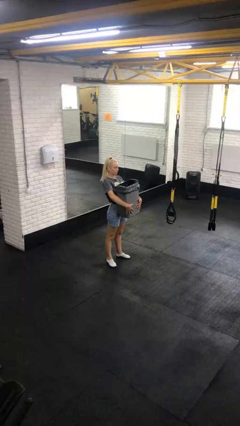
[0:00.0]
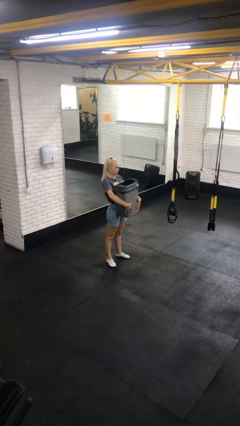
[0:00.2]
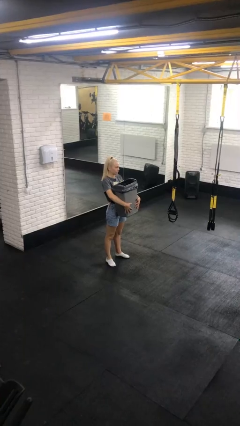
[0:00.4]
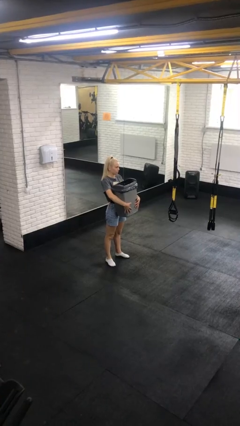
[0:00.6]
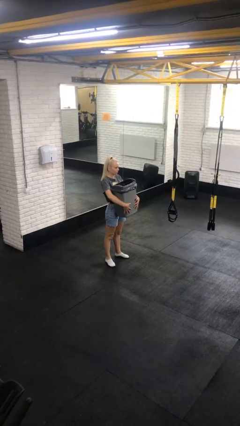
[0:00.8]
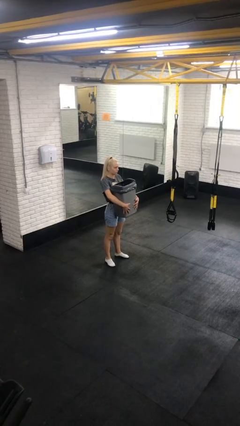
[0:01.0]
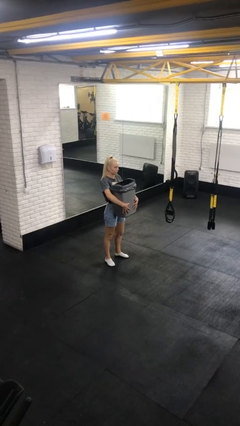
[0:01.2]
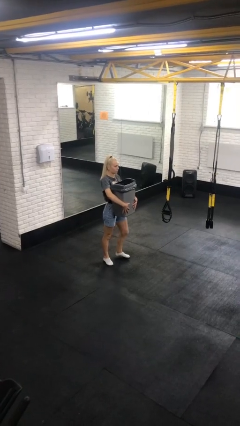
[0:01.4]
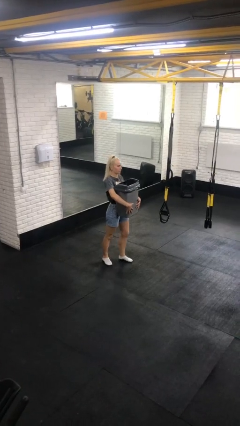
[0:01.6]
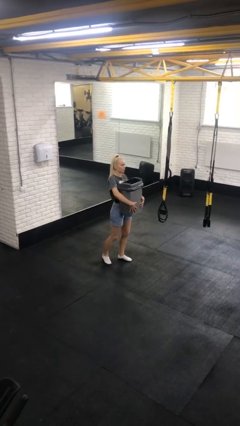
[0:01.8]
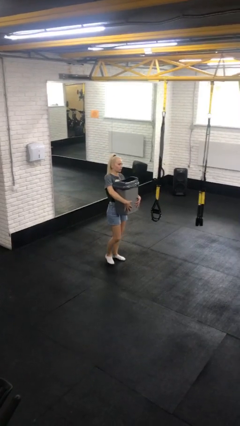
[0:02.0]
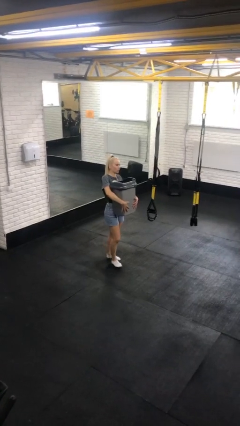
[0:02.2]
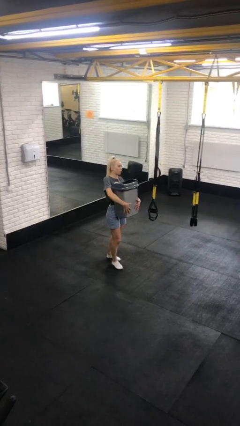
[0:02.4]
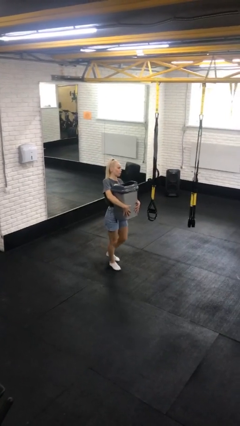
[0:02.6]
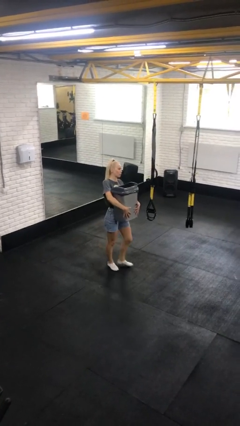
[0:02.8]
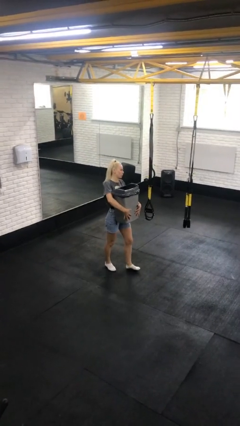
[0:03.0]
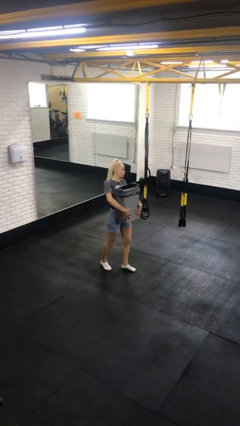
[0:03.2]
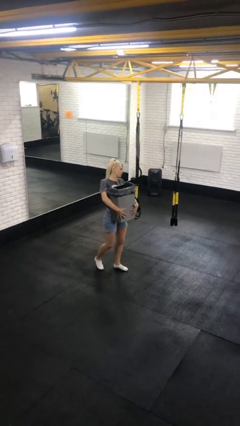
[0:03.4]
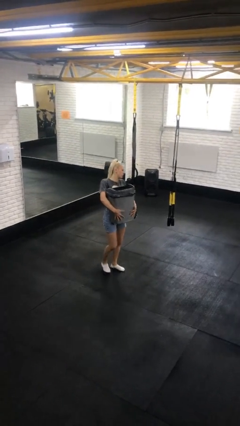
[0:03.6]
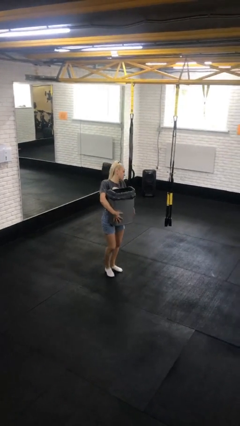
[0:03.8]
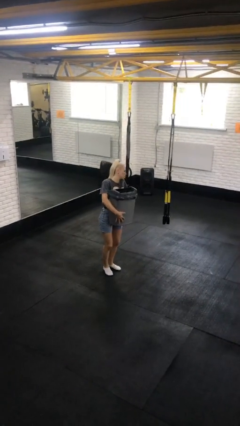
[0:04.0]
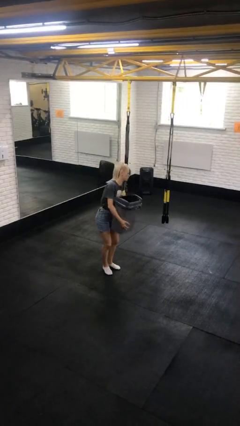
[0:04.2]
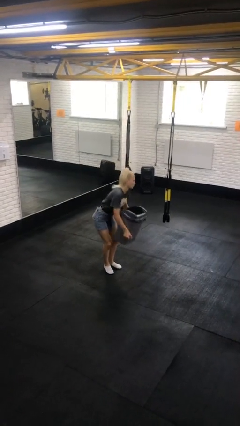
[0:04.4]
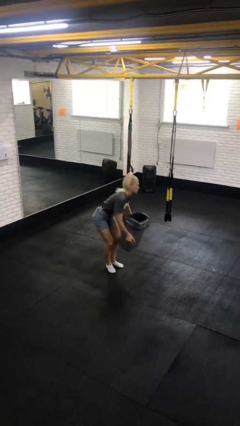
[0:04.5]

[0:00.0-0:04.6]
person carries heavy object

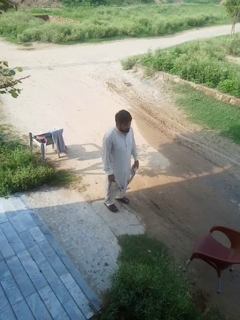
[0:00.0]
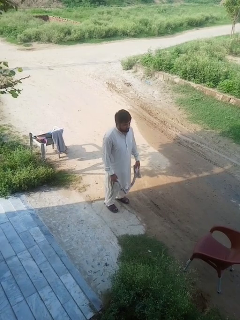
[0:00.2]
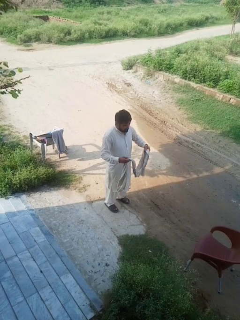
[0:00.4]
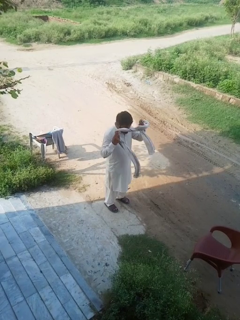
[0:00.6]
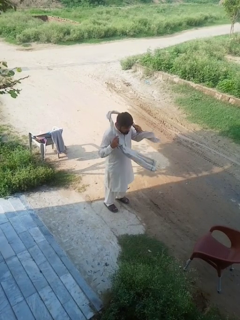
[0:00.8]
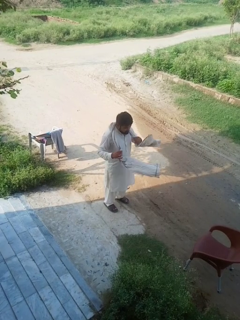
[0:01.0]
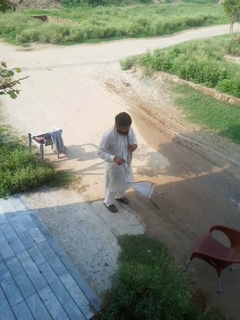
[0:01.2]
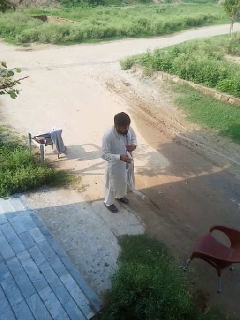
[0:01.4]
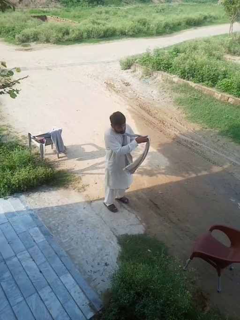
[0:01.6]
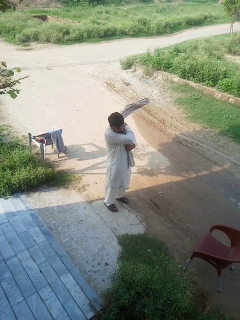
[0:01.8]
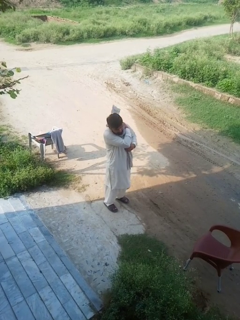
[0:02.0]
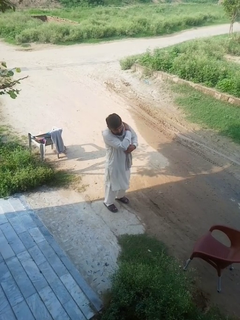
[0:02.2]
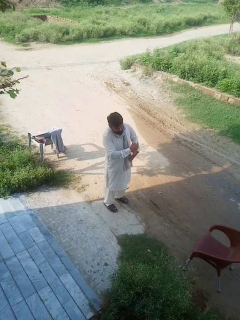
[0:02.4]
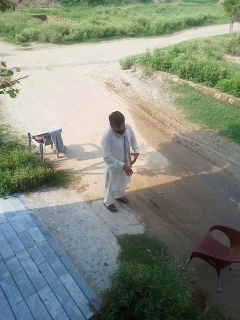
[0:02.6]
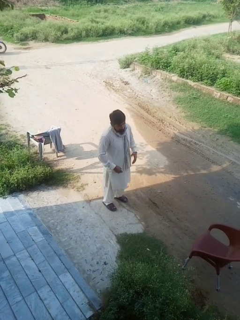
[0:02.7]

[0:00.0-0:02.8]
person puts on scarf

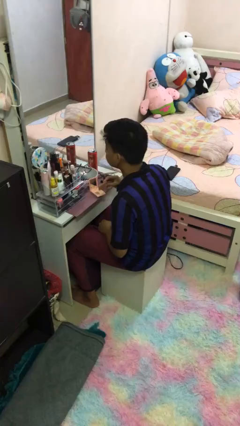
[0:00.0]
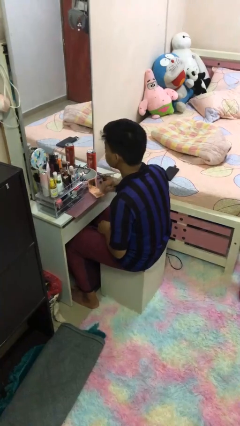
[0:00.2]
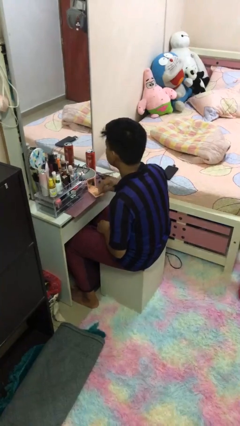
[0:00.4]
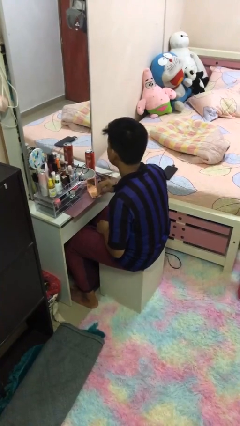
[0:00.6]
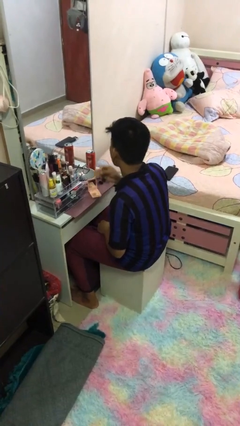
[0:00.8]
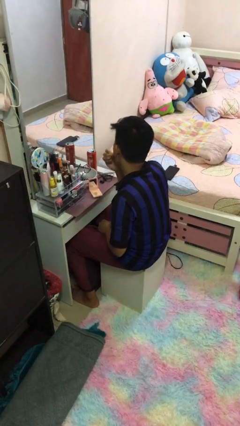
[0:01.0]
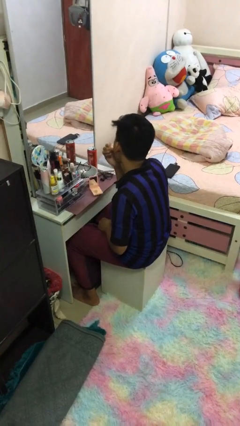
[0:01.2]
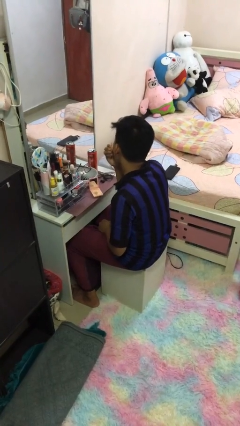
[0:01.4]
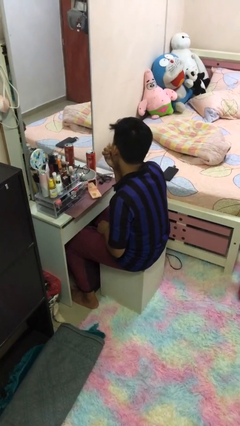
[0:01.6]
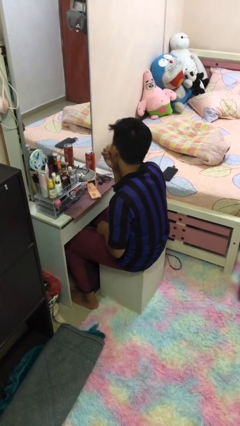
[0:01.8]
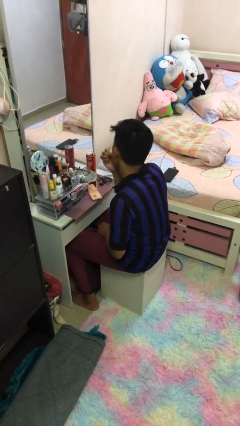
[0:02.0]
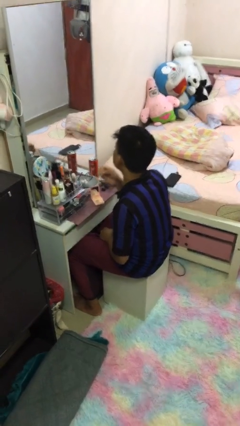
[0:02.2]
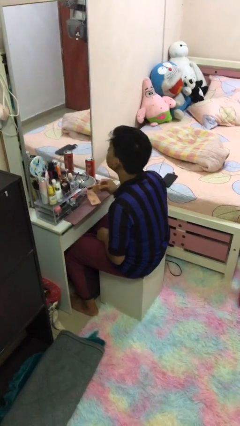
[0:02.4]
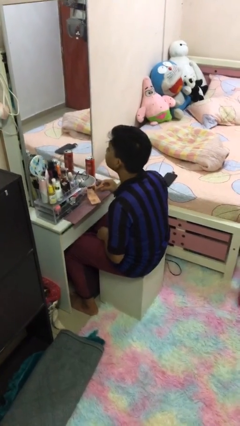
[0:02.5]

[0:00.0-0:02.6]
person applies foundation makeup

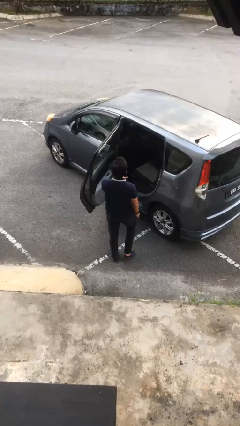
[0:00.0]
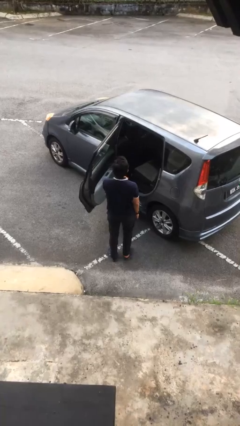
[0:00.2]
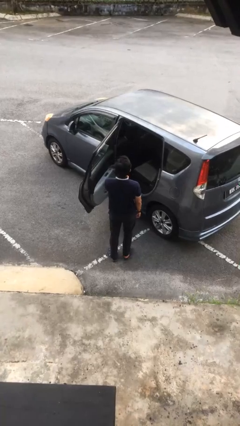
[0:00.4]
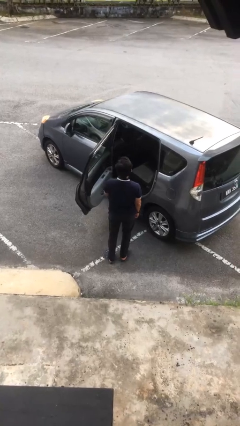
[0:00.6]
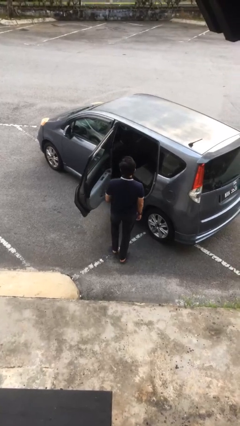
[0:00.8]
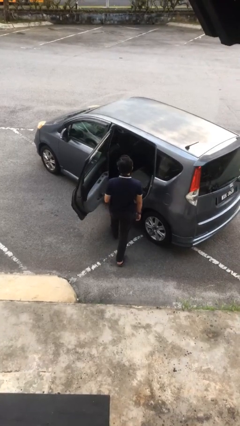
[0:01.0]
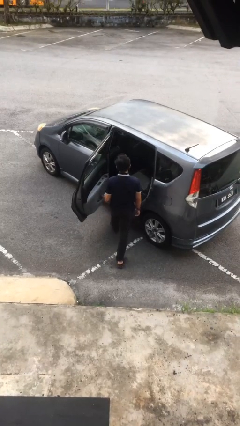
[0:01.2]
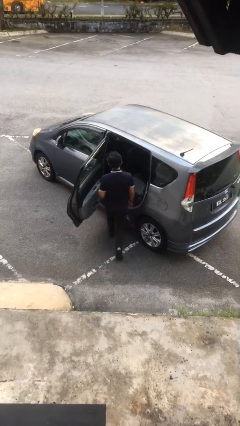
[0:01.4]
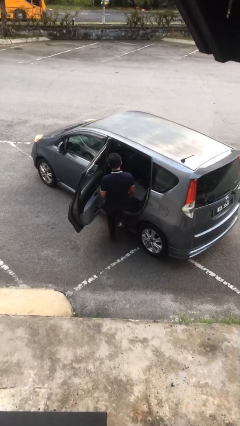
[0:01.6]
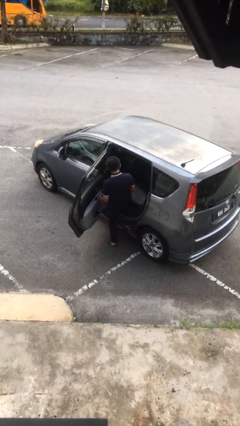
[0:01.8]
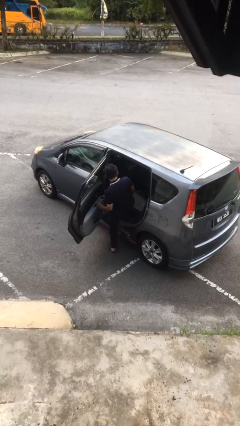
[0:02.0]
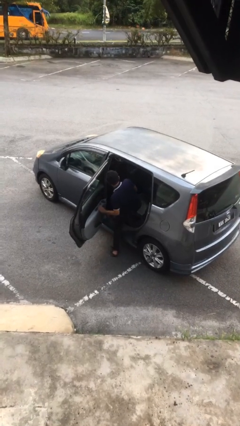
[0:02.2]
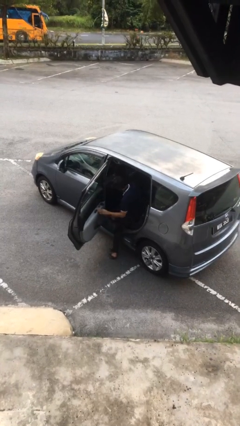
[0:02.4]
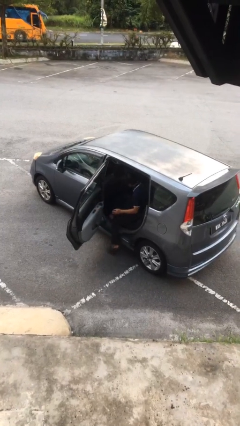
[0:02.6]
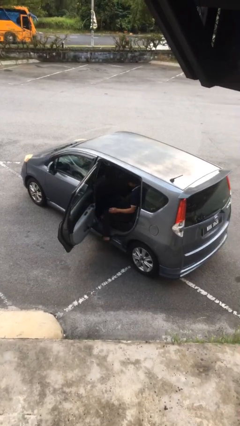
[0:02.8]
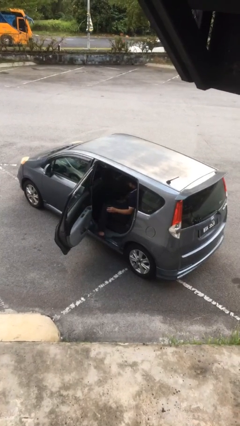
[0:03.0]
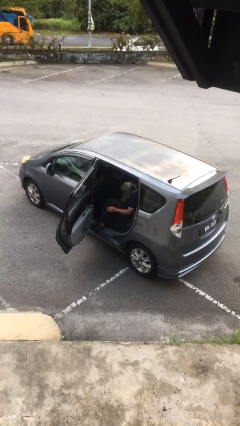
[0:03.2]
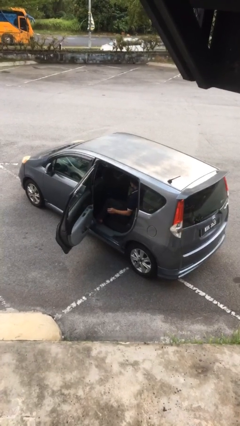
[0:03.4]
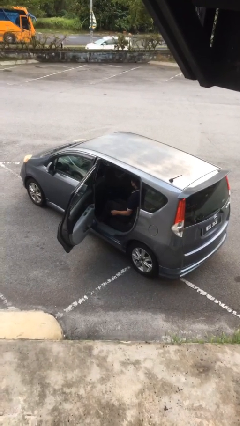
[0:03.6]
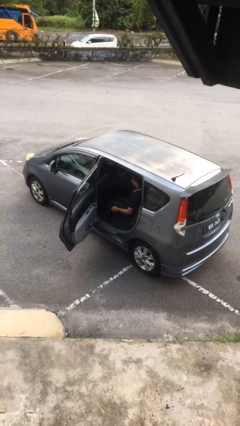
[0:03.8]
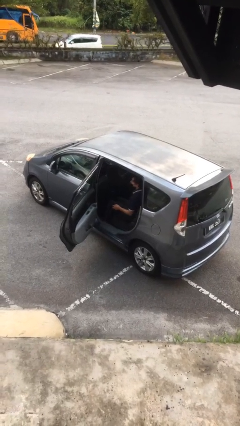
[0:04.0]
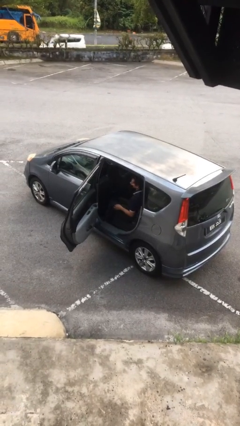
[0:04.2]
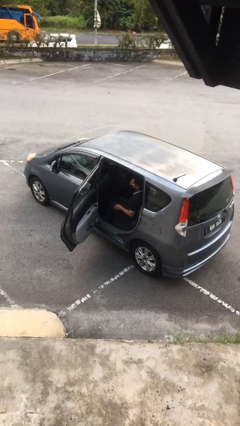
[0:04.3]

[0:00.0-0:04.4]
person enters car

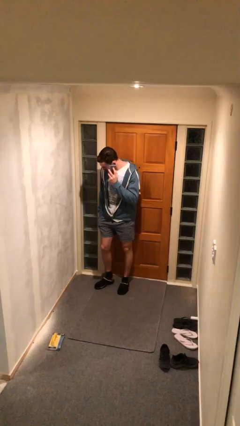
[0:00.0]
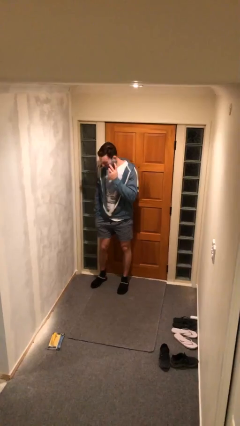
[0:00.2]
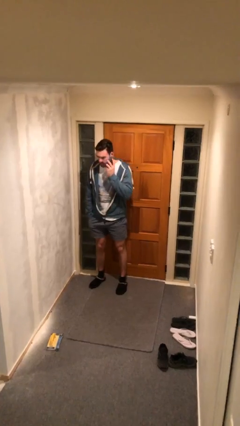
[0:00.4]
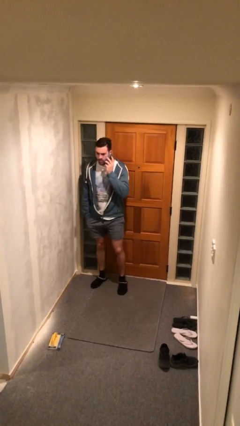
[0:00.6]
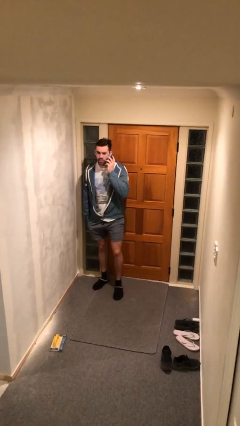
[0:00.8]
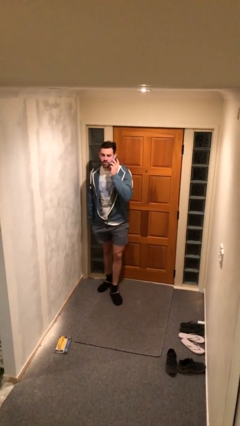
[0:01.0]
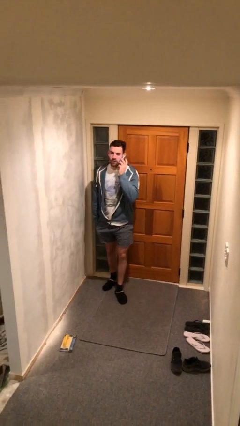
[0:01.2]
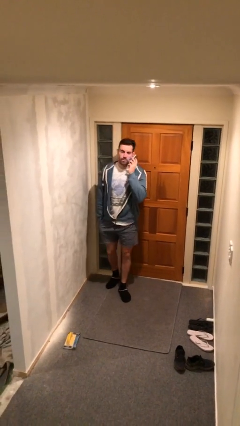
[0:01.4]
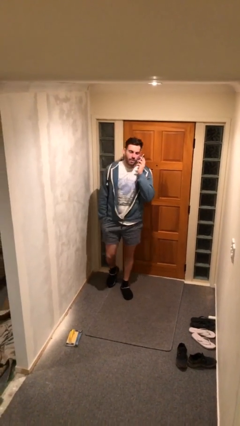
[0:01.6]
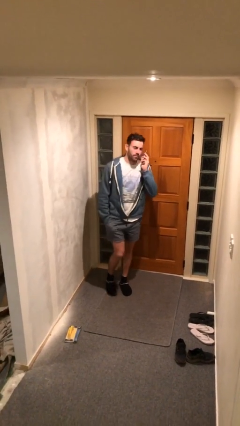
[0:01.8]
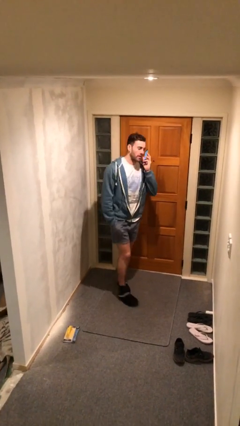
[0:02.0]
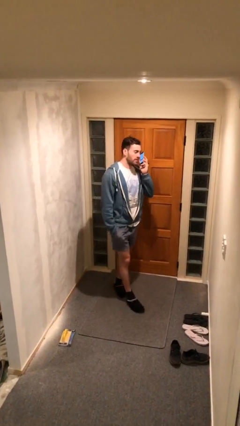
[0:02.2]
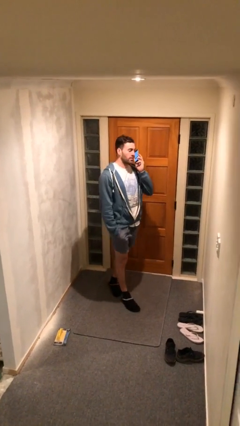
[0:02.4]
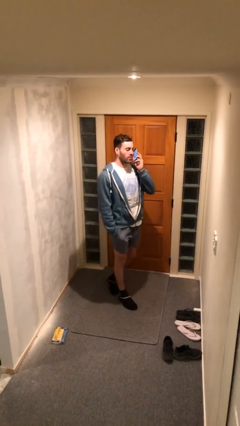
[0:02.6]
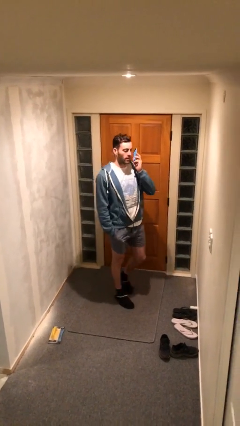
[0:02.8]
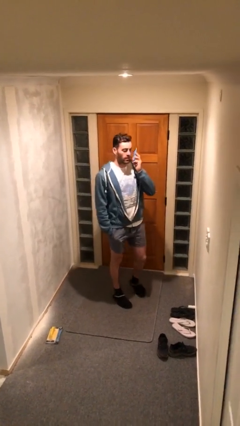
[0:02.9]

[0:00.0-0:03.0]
person talks on phone

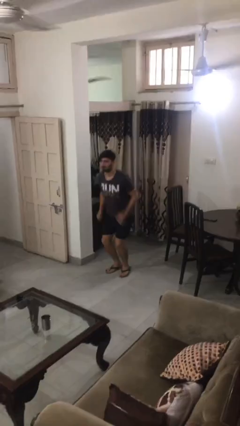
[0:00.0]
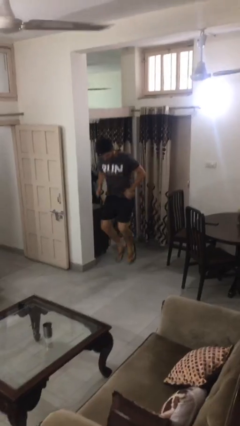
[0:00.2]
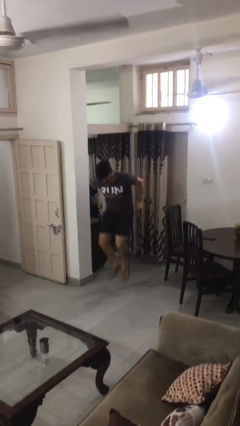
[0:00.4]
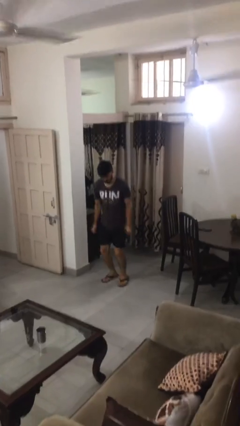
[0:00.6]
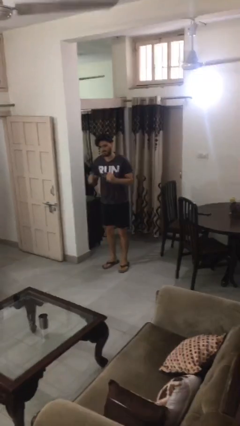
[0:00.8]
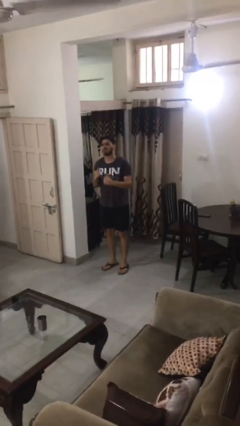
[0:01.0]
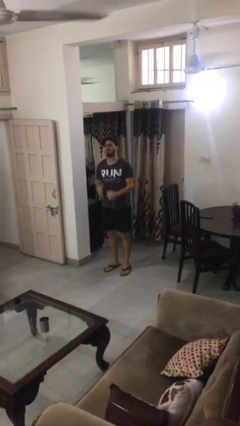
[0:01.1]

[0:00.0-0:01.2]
person jumps
